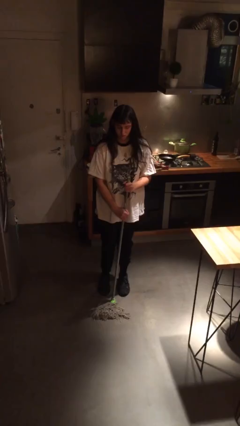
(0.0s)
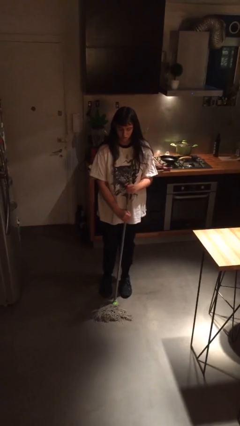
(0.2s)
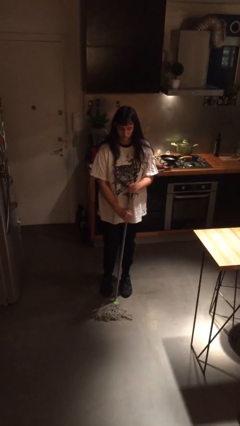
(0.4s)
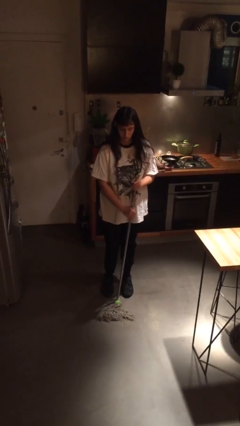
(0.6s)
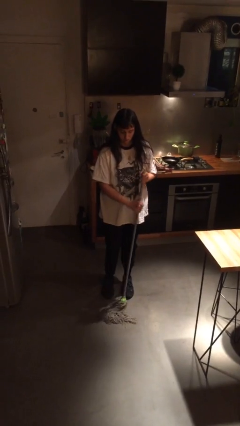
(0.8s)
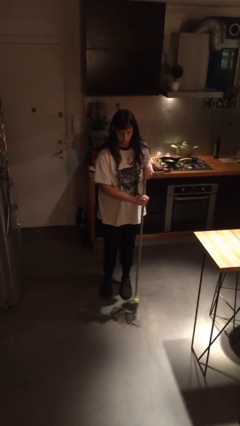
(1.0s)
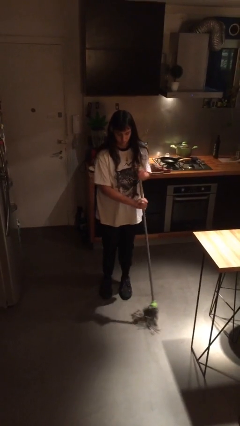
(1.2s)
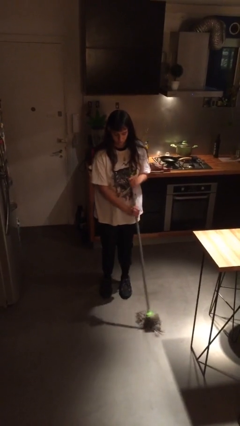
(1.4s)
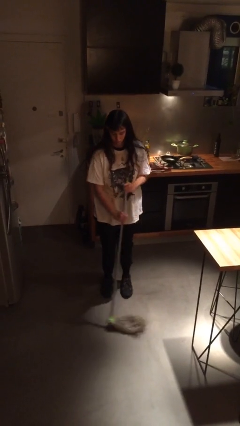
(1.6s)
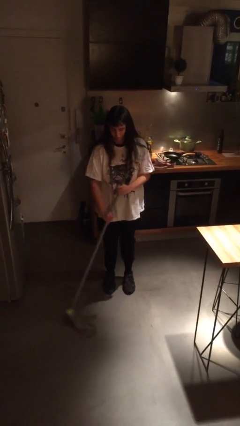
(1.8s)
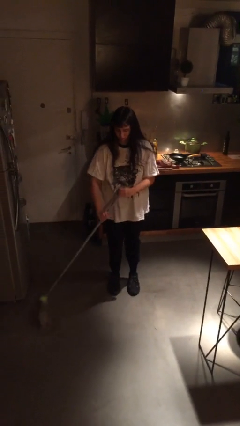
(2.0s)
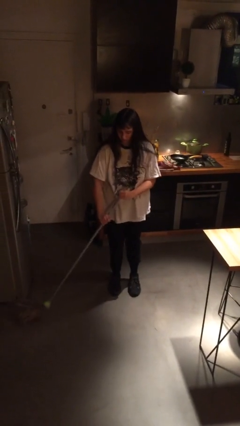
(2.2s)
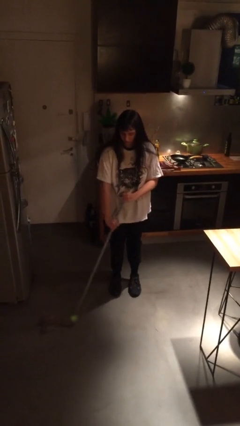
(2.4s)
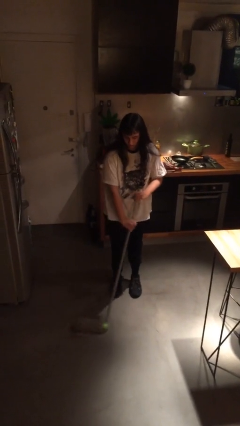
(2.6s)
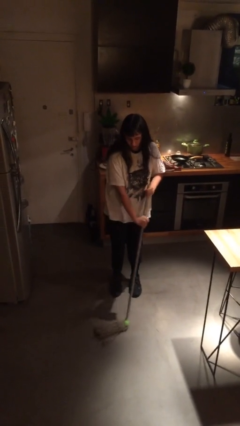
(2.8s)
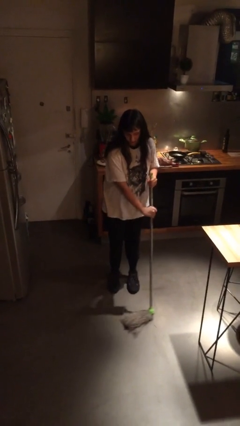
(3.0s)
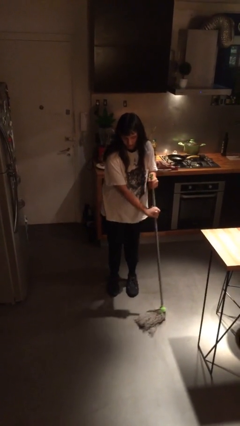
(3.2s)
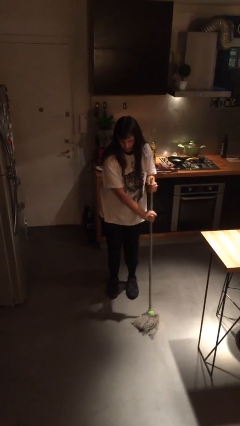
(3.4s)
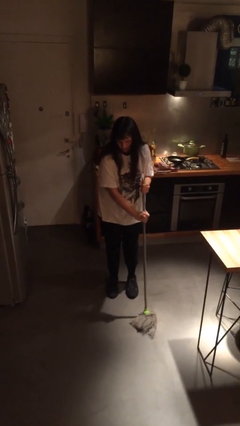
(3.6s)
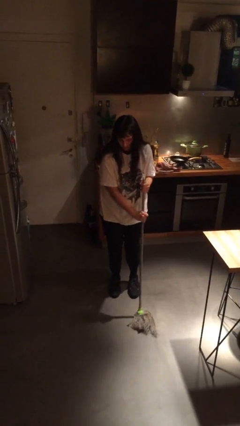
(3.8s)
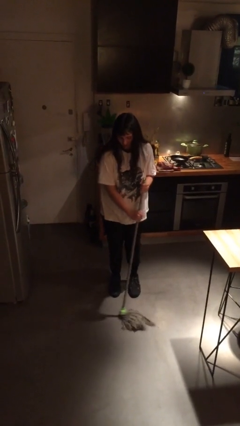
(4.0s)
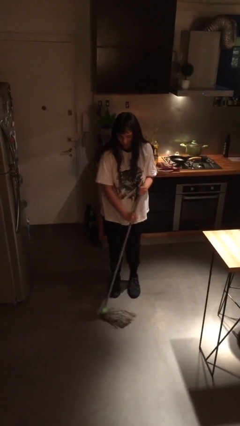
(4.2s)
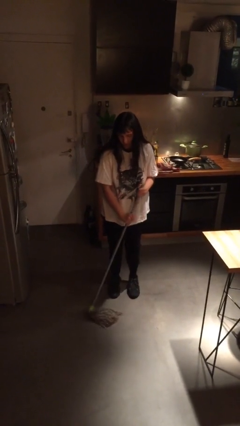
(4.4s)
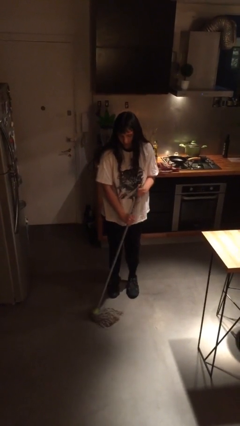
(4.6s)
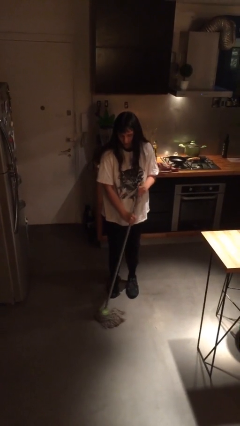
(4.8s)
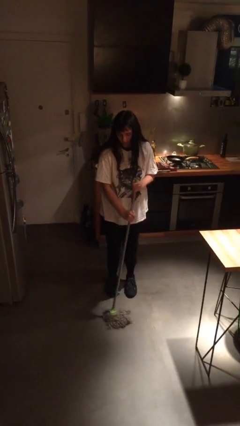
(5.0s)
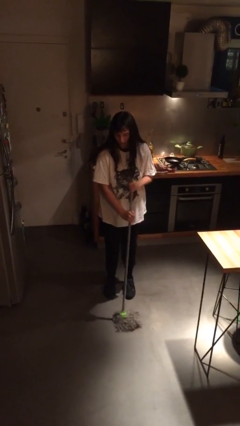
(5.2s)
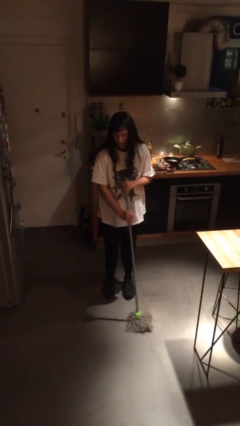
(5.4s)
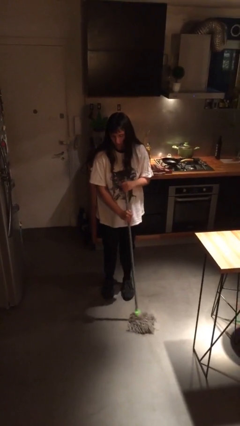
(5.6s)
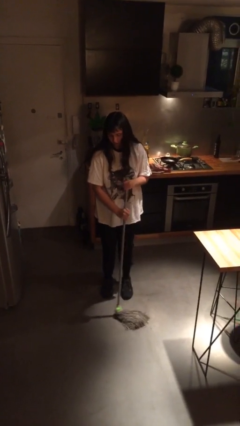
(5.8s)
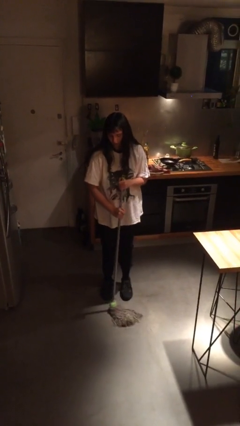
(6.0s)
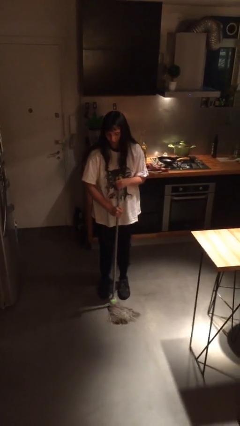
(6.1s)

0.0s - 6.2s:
person mops

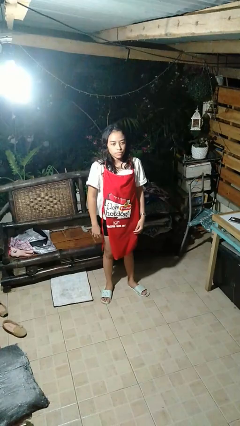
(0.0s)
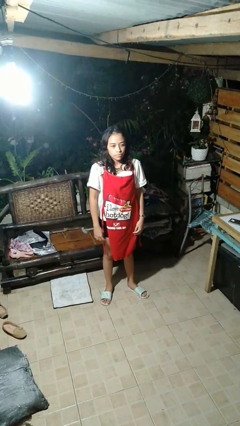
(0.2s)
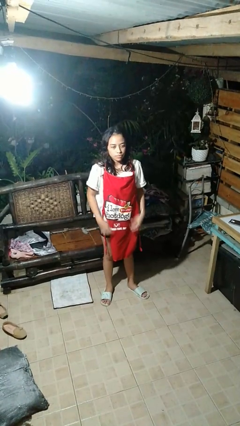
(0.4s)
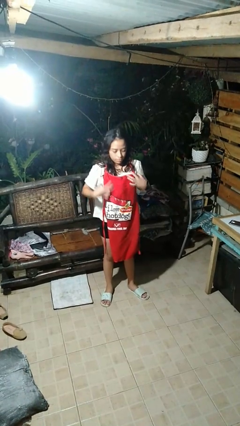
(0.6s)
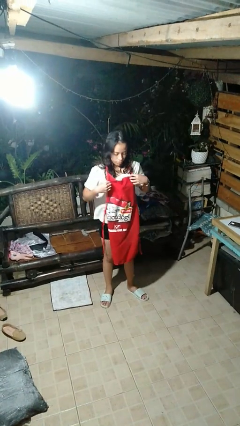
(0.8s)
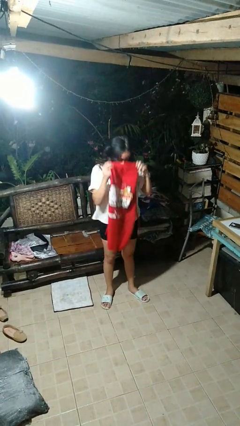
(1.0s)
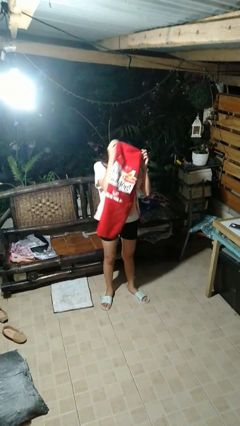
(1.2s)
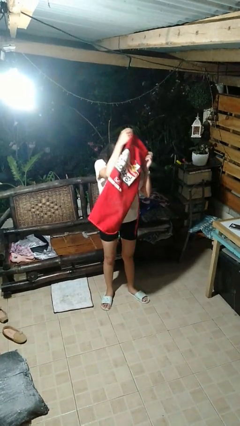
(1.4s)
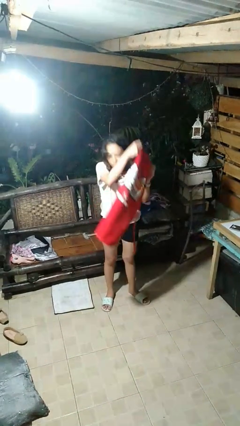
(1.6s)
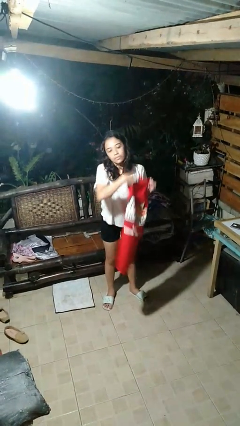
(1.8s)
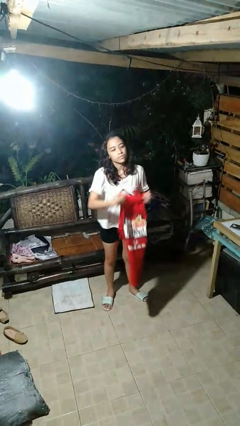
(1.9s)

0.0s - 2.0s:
person takes off apron

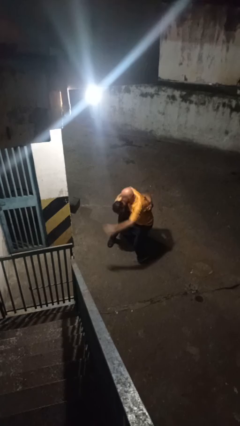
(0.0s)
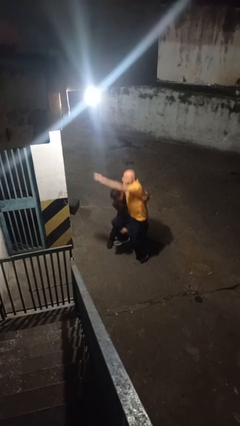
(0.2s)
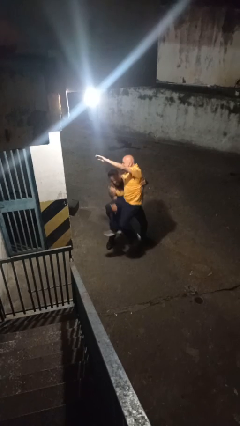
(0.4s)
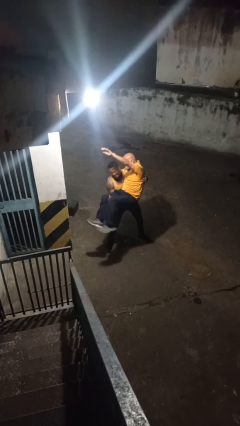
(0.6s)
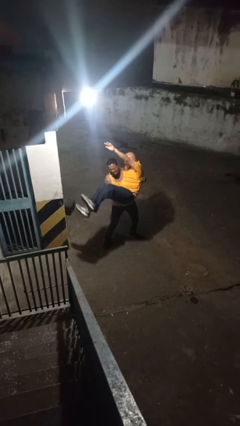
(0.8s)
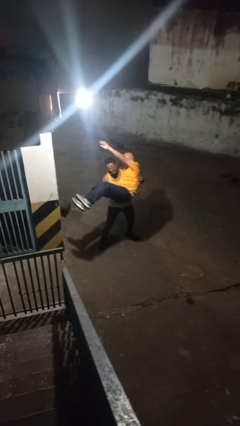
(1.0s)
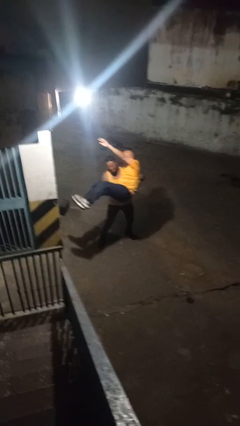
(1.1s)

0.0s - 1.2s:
person picks up person

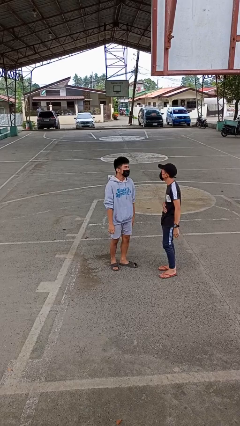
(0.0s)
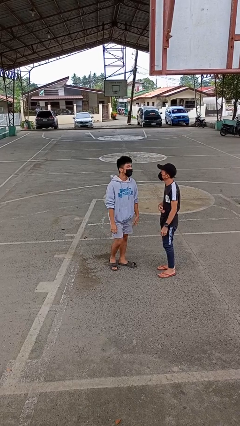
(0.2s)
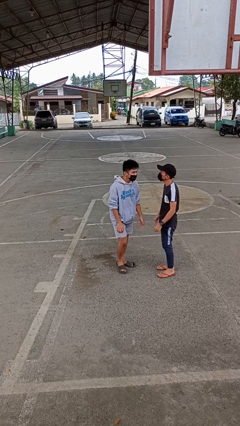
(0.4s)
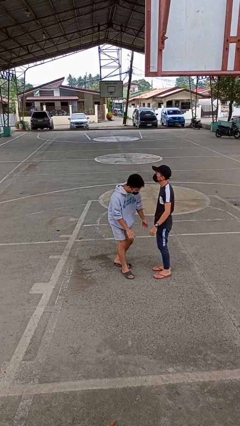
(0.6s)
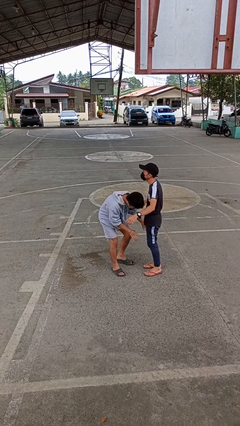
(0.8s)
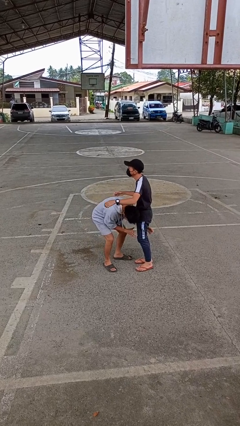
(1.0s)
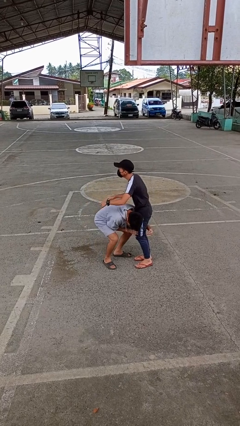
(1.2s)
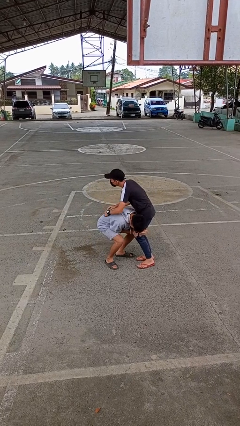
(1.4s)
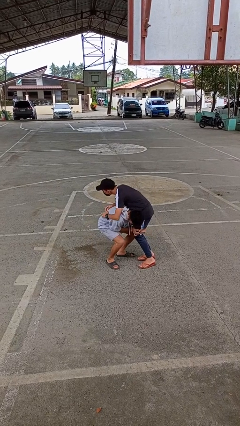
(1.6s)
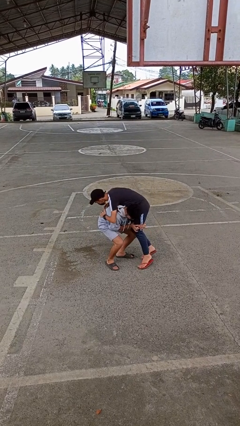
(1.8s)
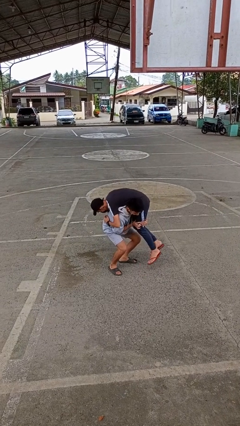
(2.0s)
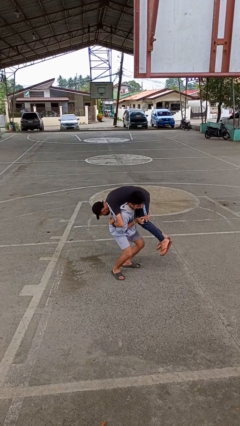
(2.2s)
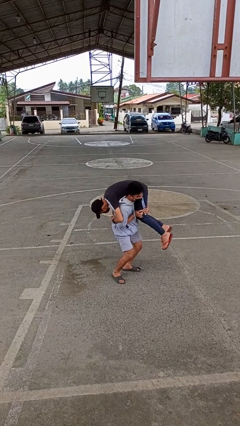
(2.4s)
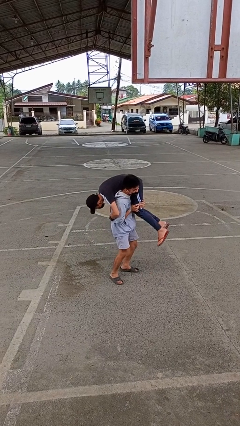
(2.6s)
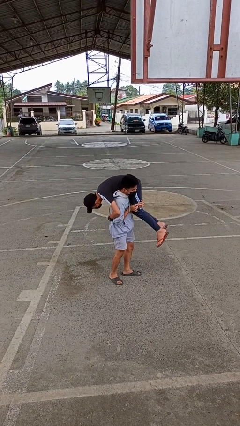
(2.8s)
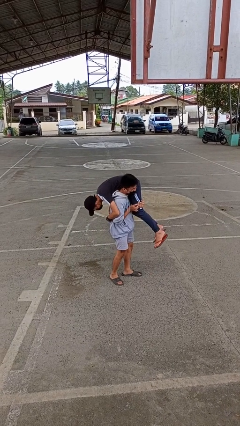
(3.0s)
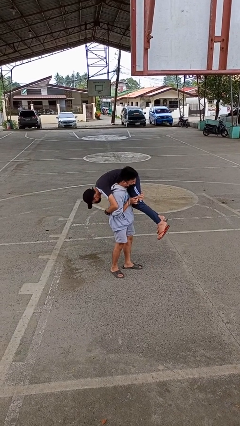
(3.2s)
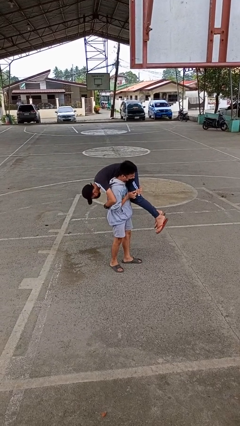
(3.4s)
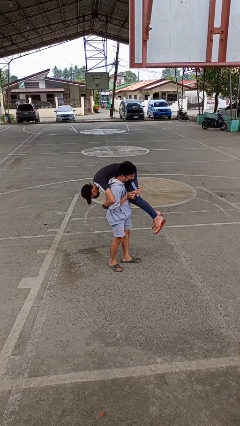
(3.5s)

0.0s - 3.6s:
person carries person over shoulder

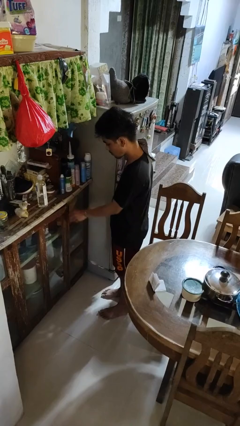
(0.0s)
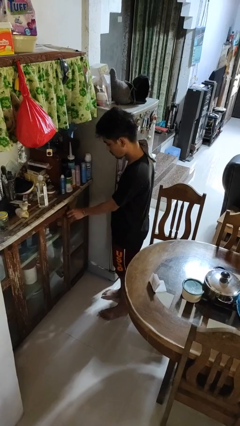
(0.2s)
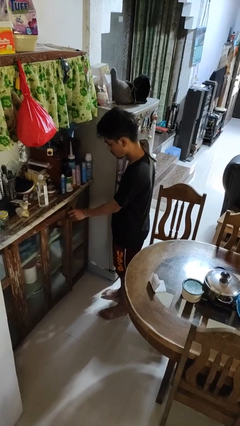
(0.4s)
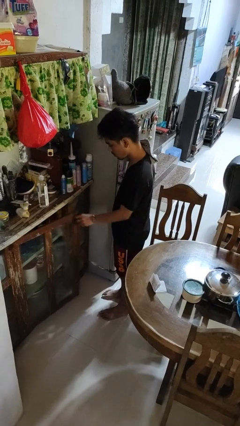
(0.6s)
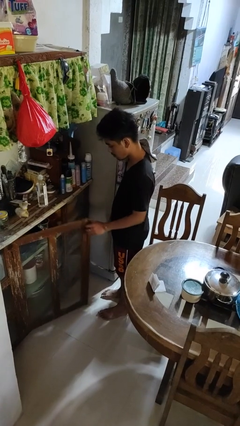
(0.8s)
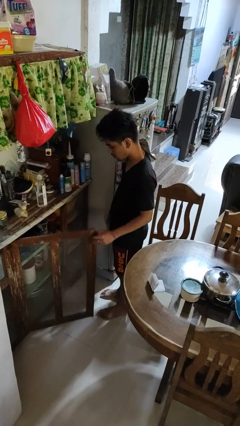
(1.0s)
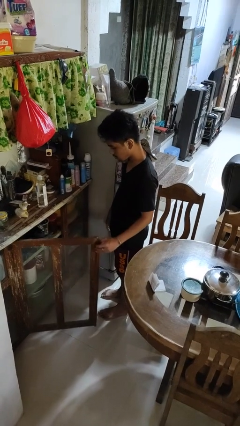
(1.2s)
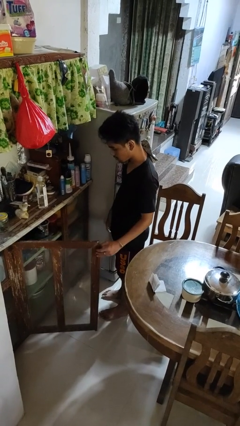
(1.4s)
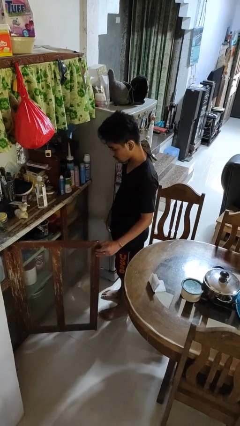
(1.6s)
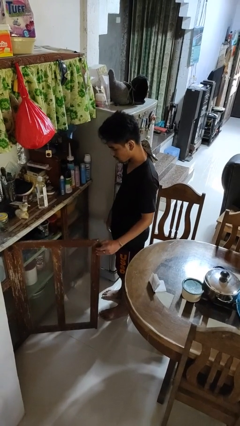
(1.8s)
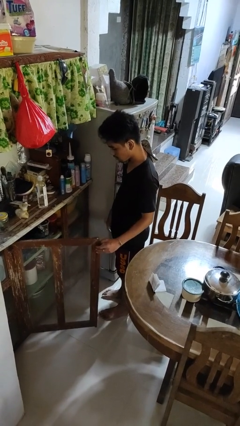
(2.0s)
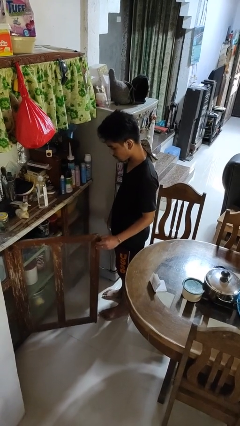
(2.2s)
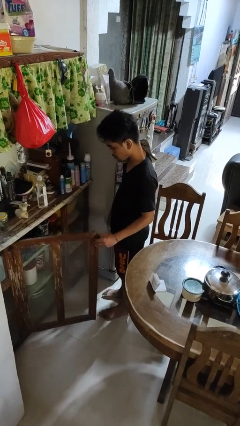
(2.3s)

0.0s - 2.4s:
person opens cabinet

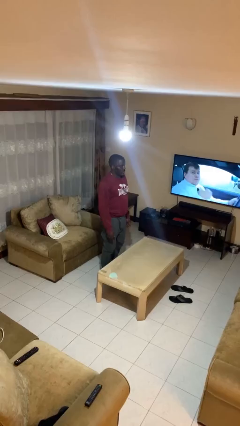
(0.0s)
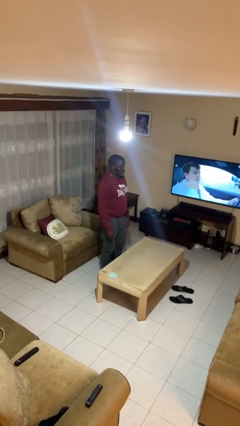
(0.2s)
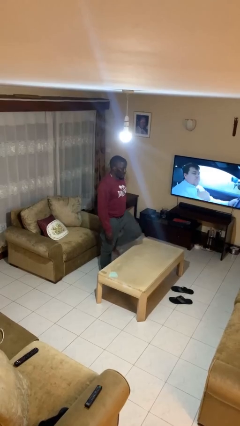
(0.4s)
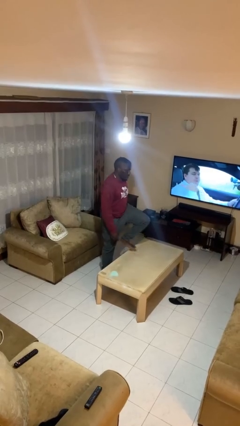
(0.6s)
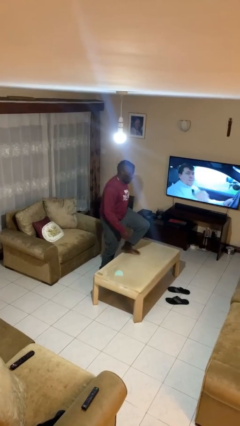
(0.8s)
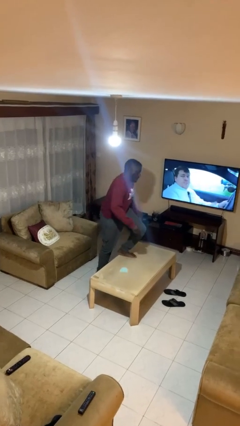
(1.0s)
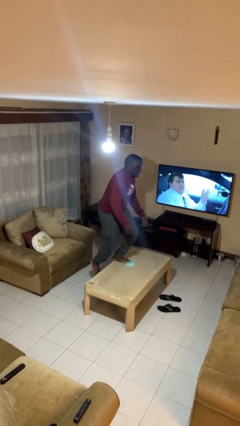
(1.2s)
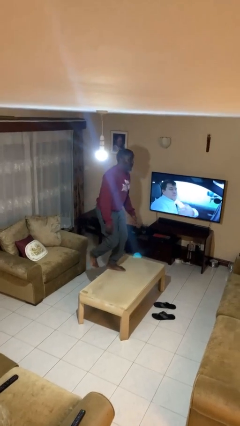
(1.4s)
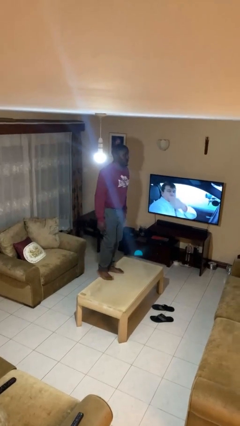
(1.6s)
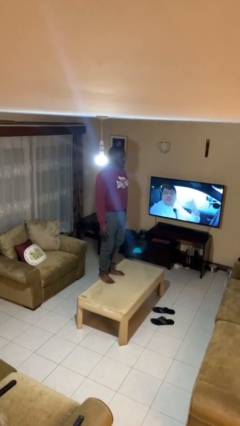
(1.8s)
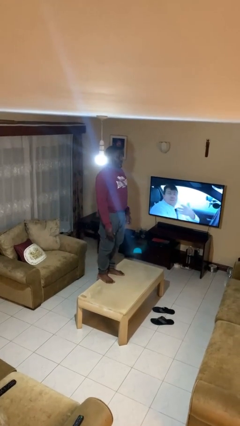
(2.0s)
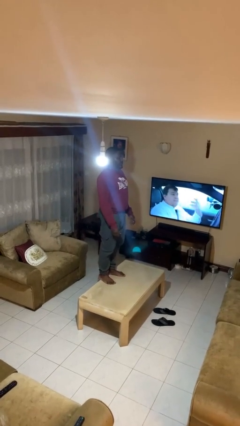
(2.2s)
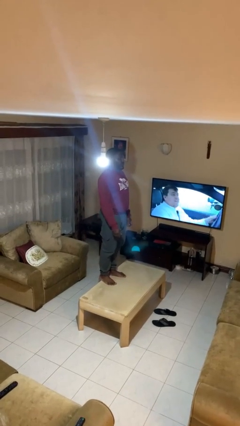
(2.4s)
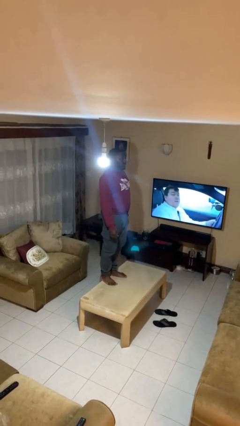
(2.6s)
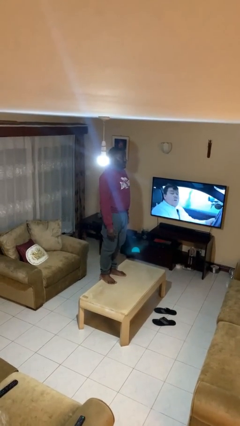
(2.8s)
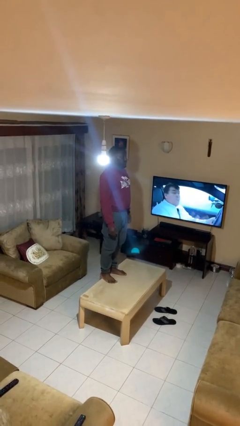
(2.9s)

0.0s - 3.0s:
person climbs on table
